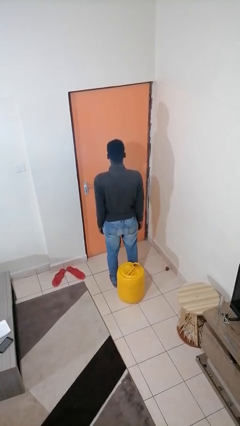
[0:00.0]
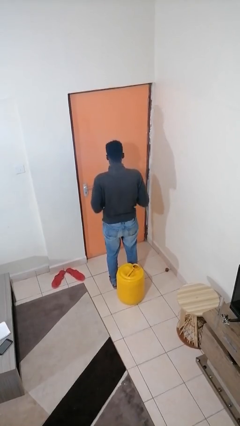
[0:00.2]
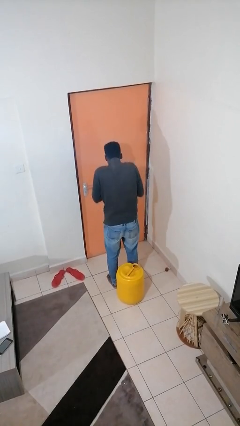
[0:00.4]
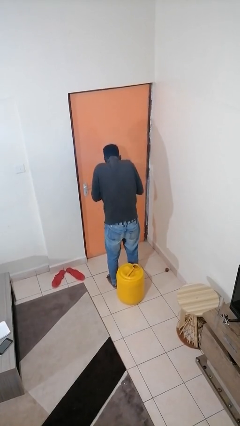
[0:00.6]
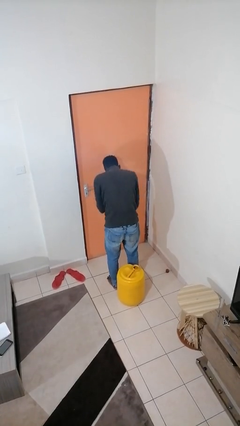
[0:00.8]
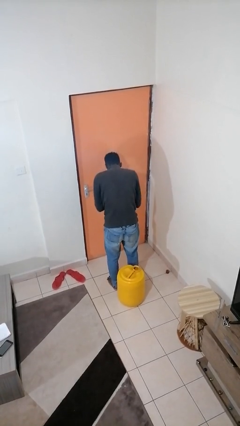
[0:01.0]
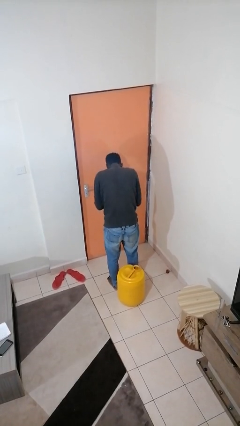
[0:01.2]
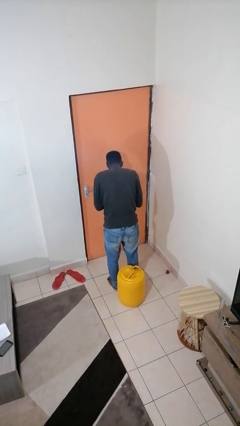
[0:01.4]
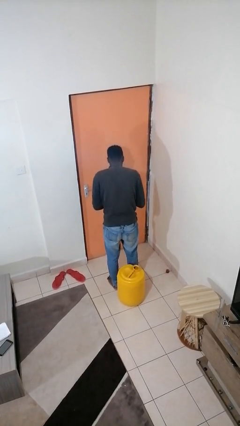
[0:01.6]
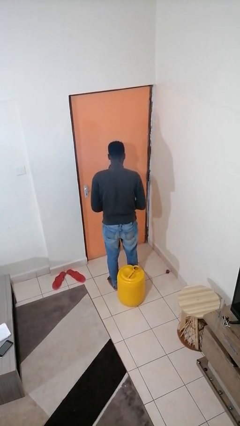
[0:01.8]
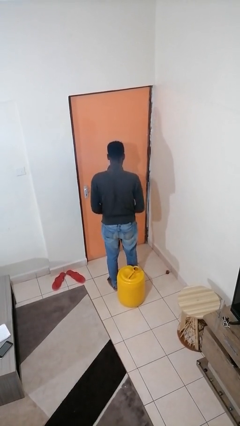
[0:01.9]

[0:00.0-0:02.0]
person sneezes into hand

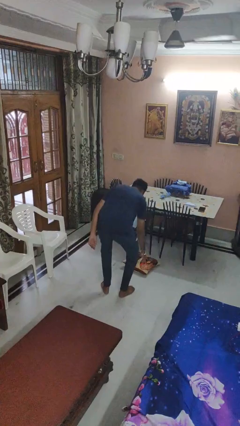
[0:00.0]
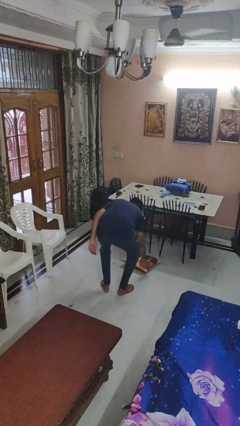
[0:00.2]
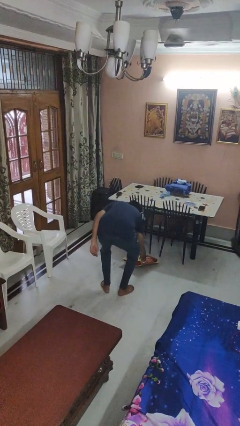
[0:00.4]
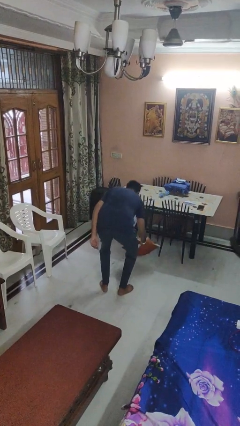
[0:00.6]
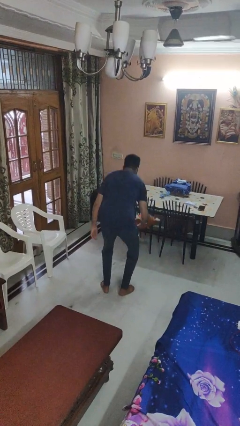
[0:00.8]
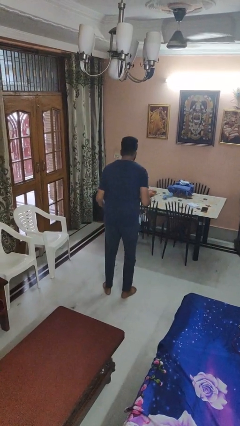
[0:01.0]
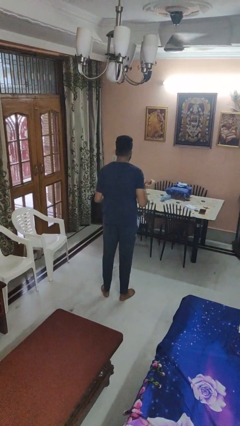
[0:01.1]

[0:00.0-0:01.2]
person picks up object from floor

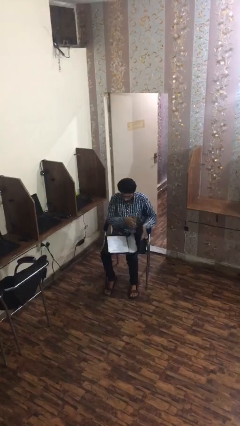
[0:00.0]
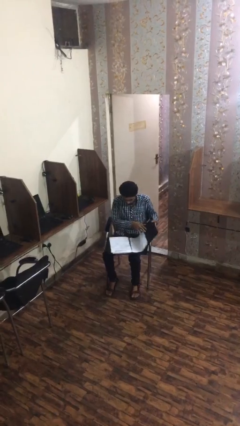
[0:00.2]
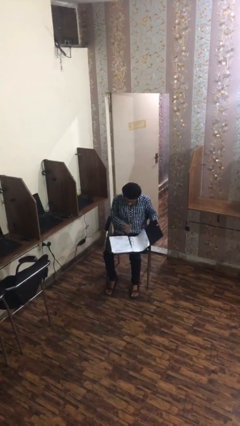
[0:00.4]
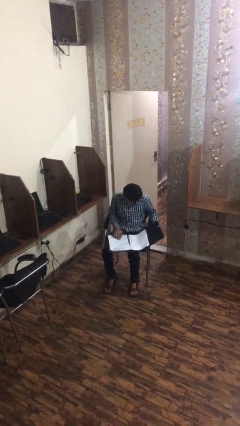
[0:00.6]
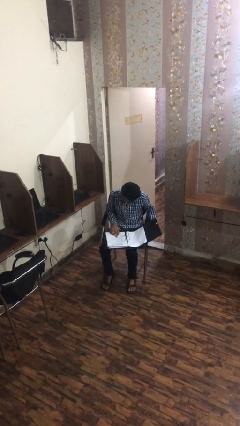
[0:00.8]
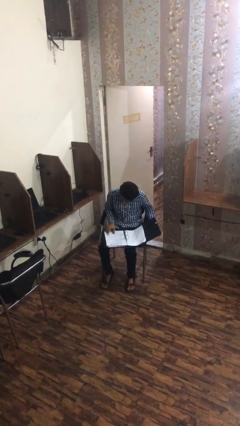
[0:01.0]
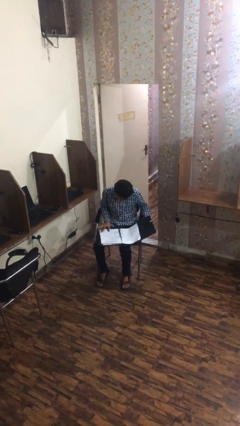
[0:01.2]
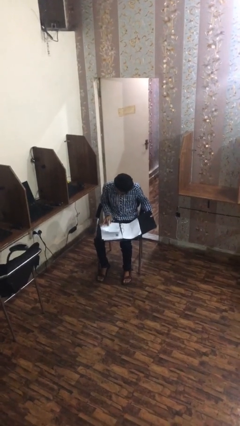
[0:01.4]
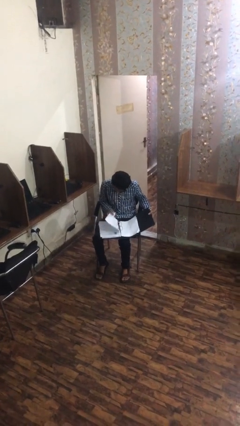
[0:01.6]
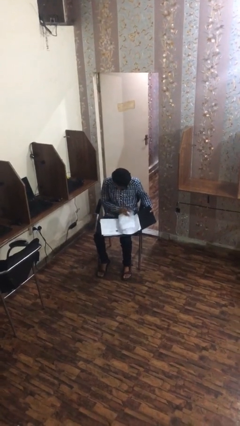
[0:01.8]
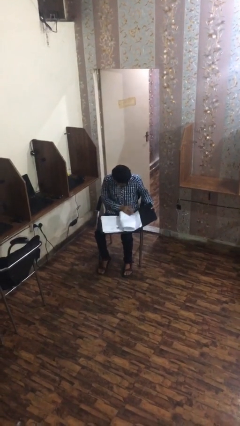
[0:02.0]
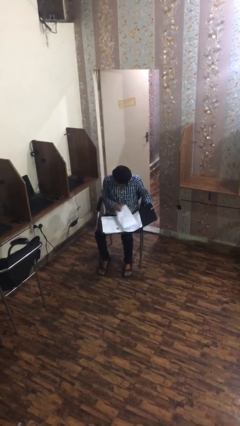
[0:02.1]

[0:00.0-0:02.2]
person reads document

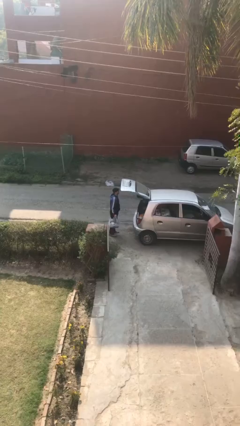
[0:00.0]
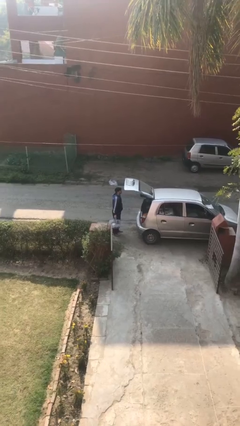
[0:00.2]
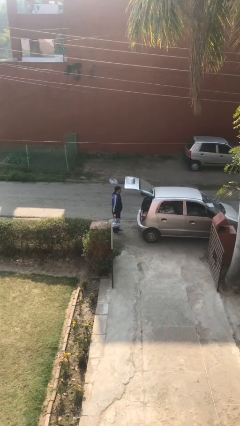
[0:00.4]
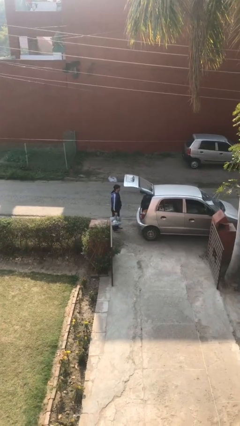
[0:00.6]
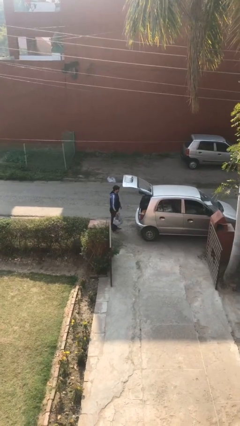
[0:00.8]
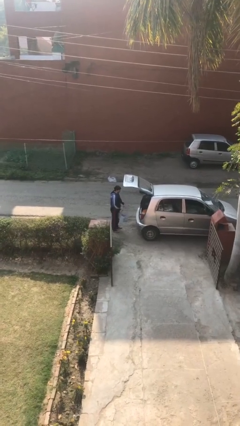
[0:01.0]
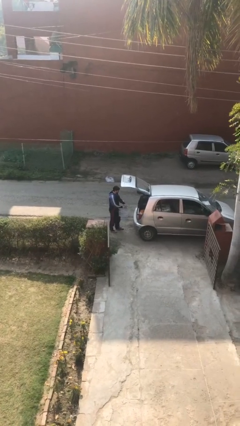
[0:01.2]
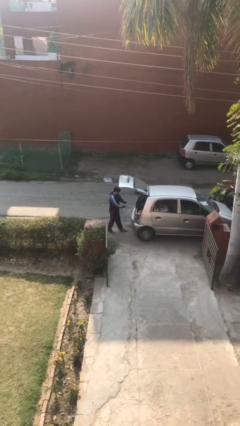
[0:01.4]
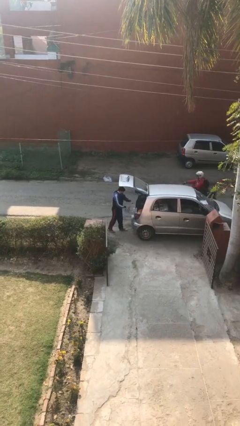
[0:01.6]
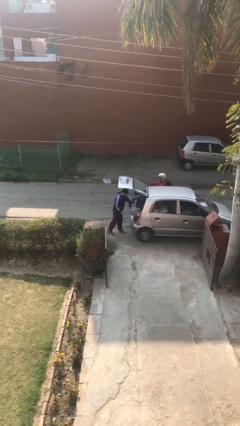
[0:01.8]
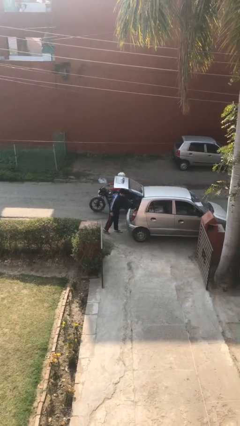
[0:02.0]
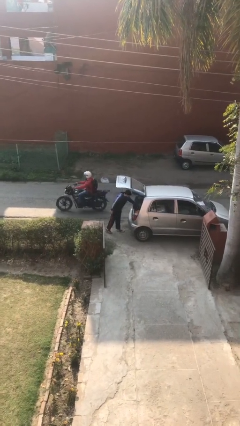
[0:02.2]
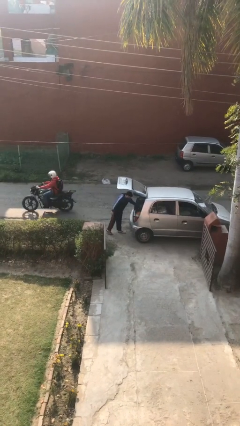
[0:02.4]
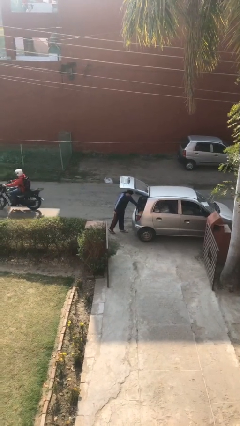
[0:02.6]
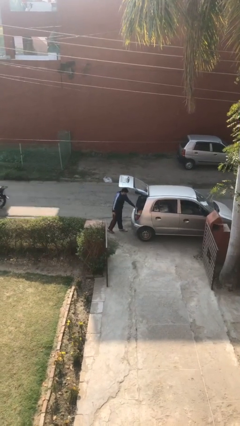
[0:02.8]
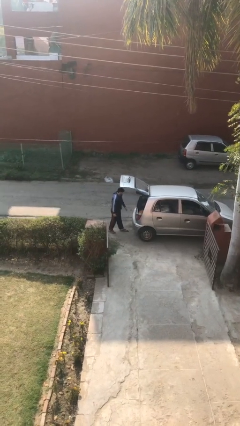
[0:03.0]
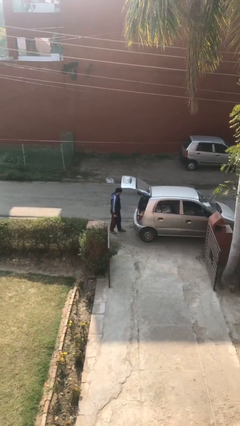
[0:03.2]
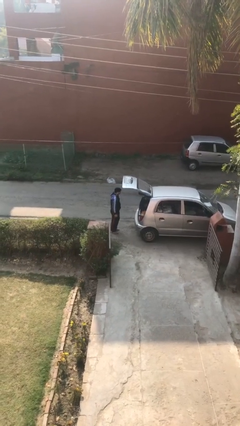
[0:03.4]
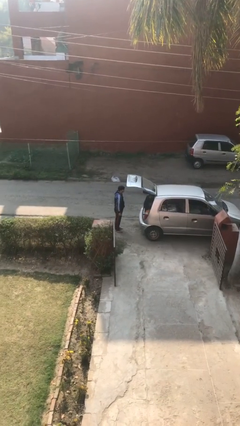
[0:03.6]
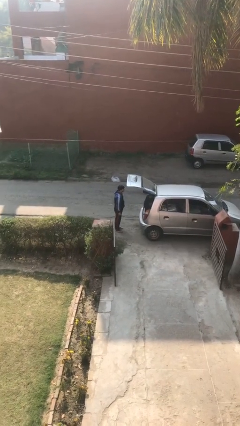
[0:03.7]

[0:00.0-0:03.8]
person loads car

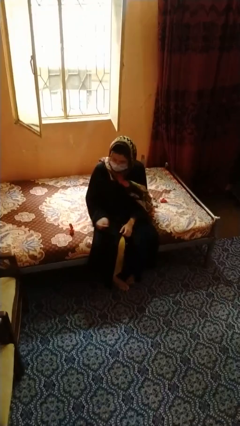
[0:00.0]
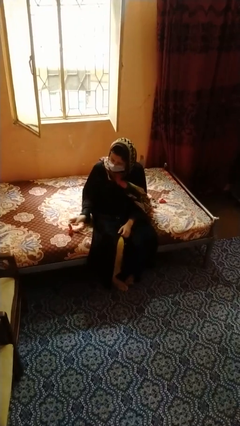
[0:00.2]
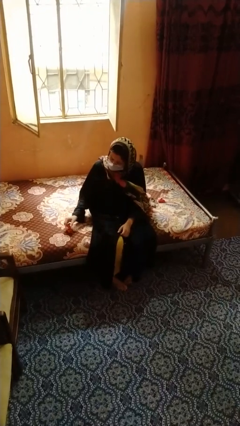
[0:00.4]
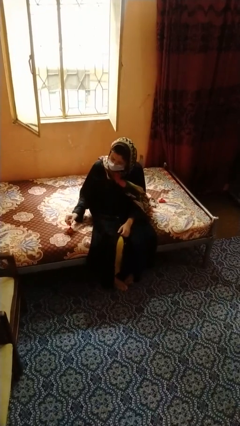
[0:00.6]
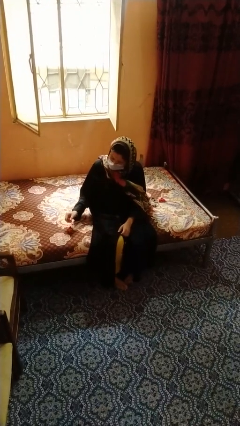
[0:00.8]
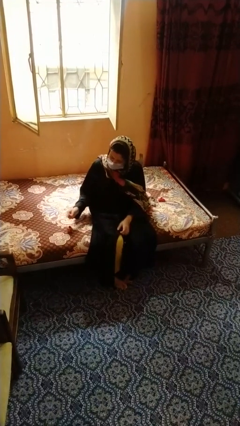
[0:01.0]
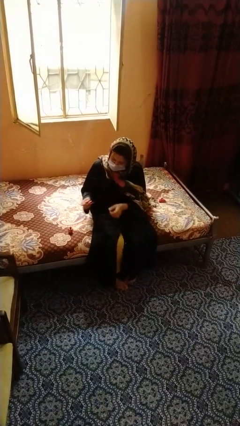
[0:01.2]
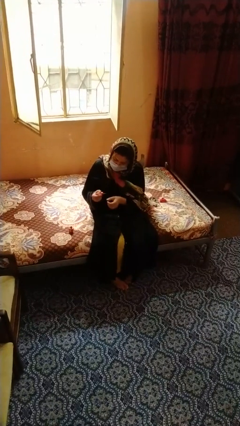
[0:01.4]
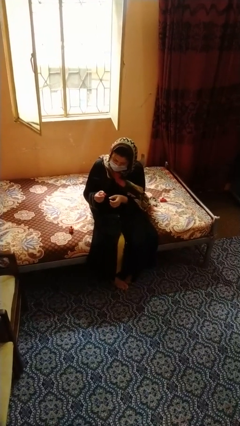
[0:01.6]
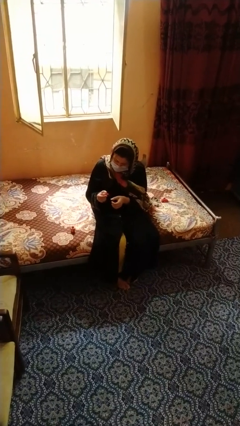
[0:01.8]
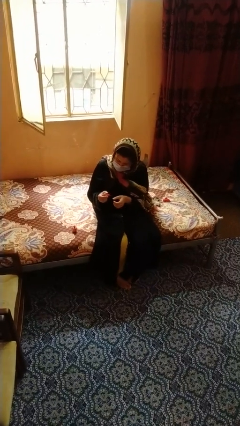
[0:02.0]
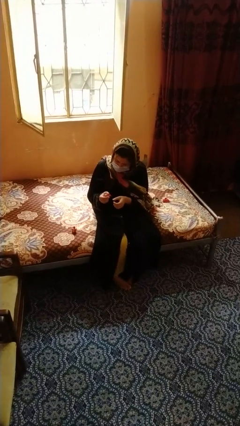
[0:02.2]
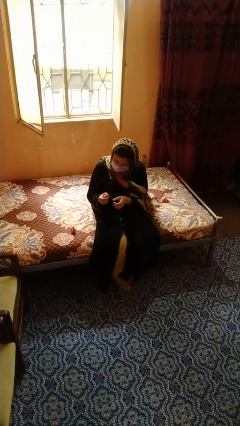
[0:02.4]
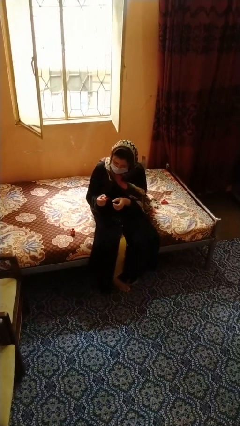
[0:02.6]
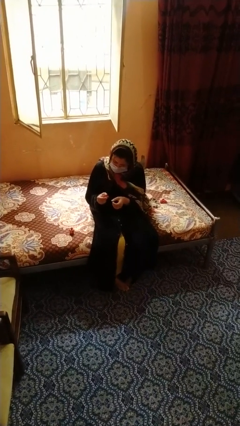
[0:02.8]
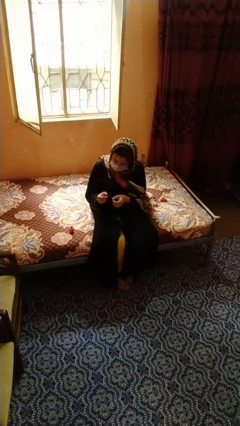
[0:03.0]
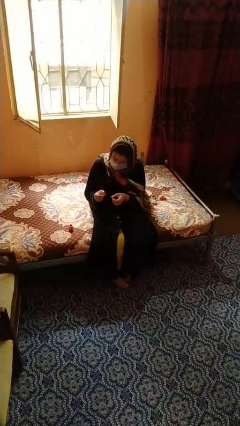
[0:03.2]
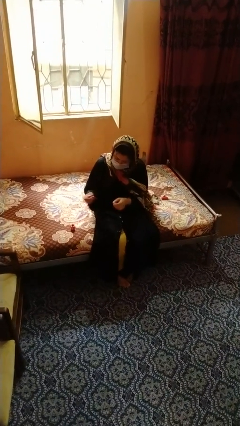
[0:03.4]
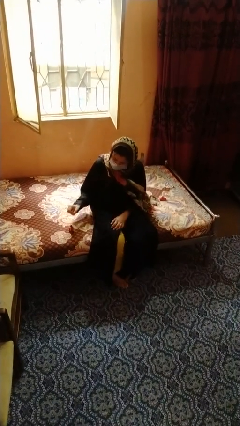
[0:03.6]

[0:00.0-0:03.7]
person paints fingernails

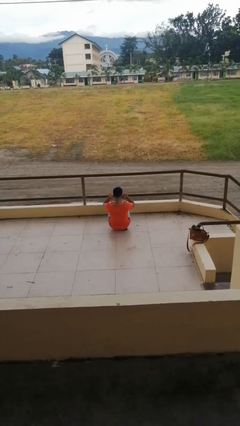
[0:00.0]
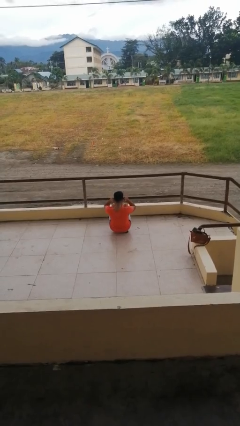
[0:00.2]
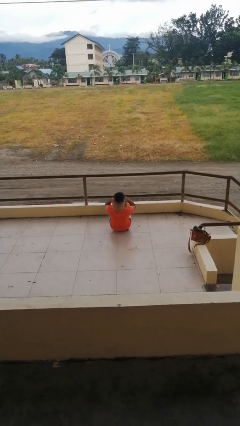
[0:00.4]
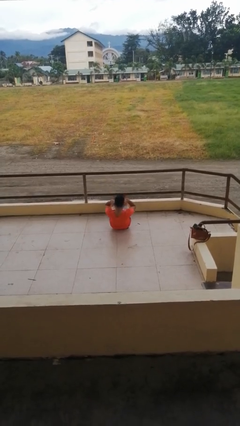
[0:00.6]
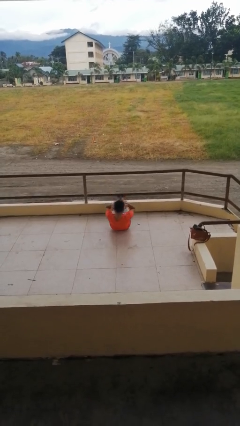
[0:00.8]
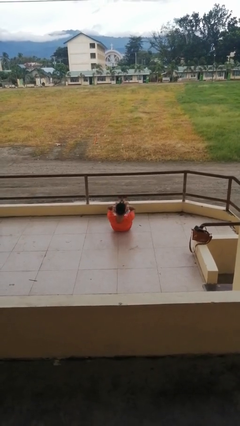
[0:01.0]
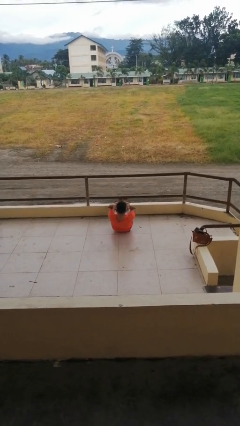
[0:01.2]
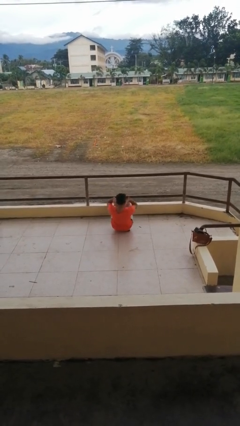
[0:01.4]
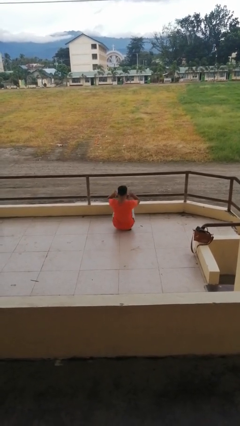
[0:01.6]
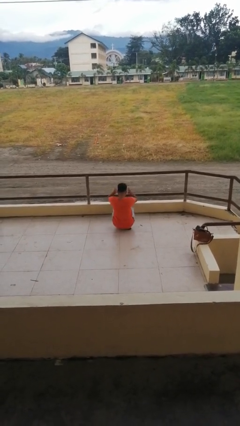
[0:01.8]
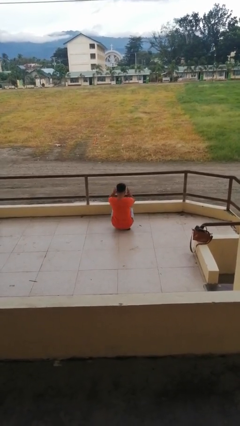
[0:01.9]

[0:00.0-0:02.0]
person exercises with situp

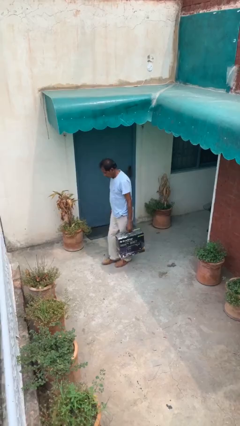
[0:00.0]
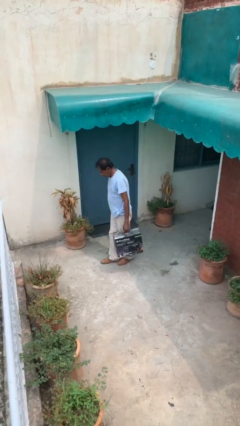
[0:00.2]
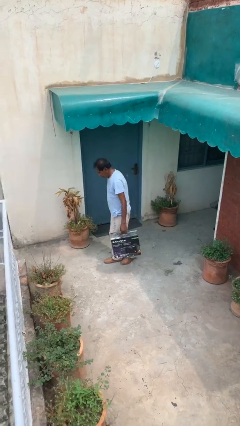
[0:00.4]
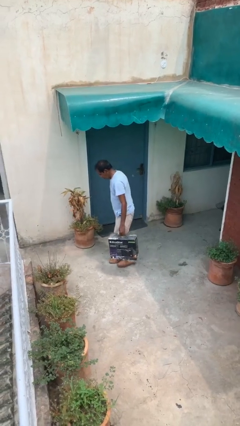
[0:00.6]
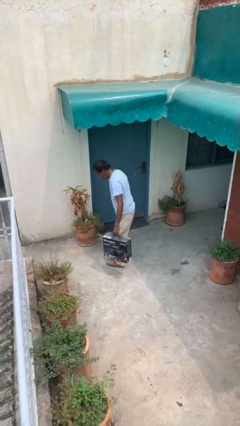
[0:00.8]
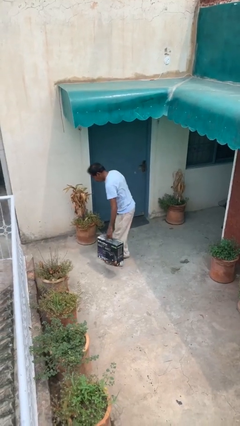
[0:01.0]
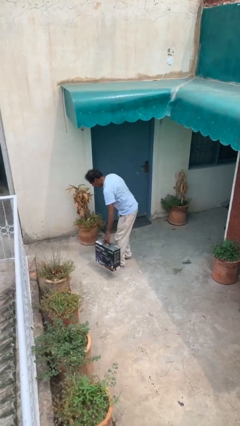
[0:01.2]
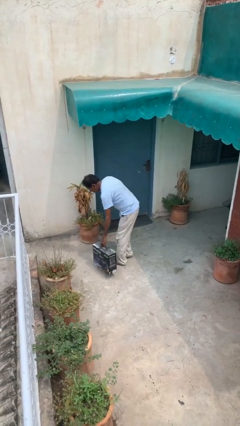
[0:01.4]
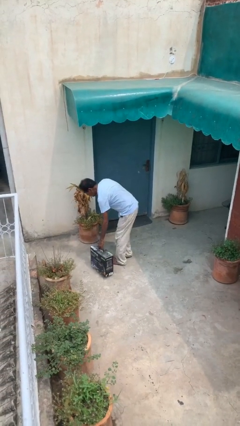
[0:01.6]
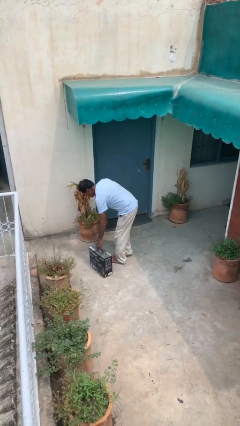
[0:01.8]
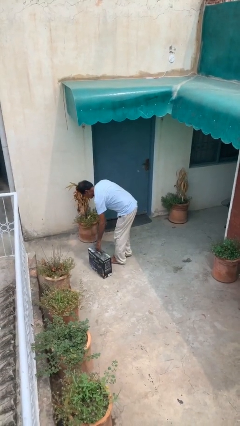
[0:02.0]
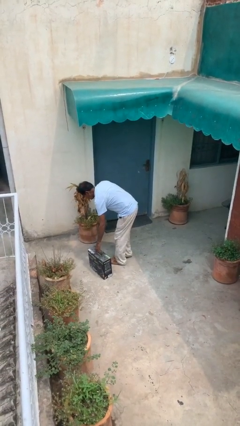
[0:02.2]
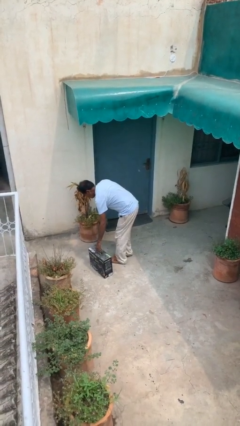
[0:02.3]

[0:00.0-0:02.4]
person puts down object on floor
